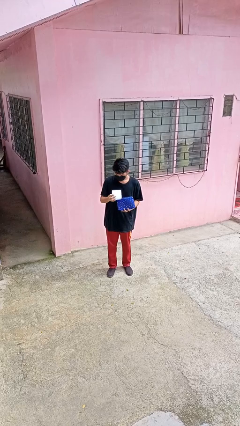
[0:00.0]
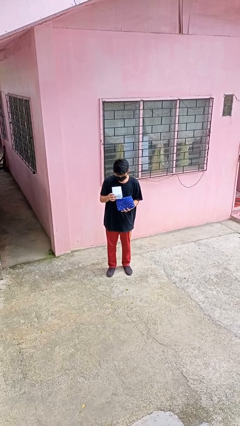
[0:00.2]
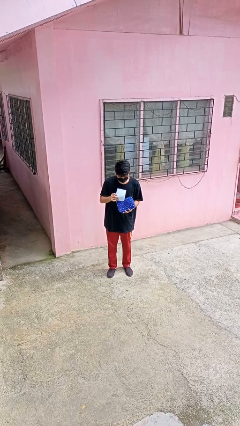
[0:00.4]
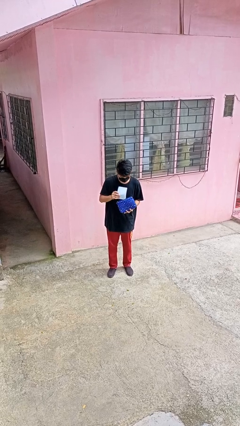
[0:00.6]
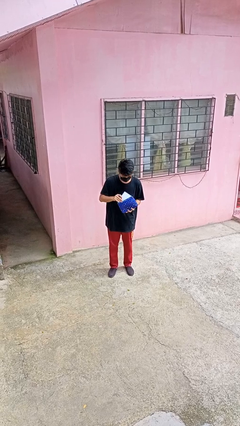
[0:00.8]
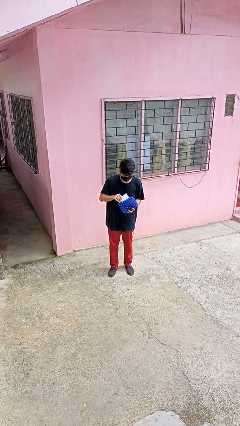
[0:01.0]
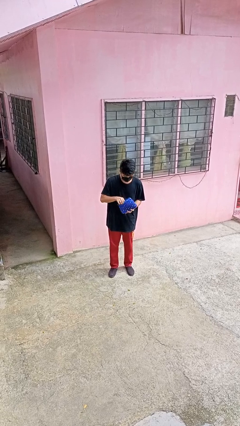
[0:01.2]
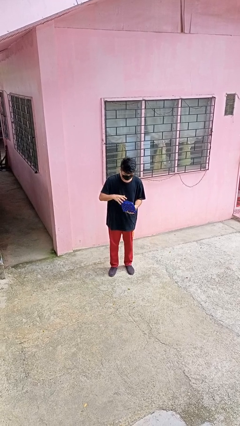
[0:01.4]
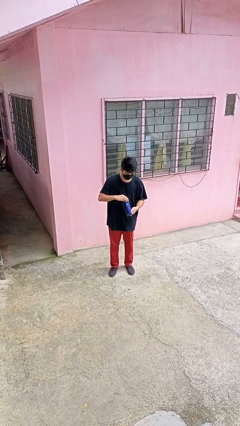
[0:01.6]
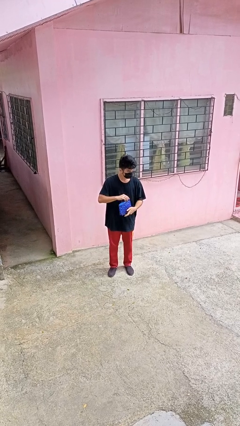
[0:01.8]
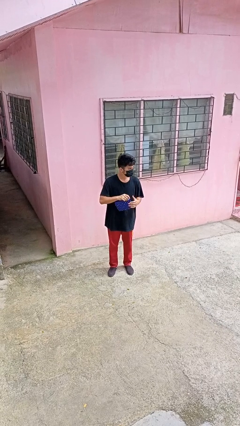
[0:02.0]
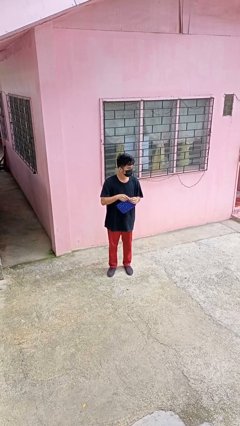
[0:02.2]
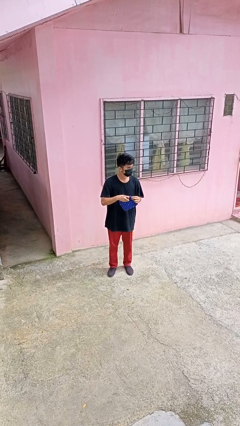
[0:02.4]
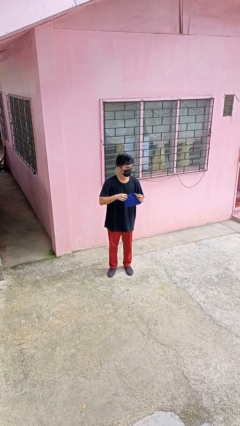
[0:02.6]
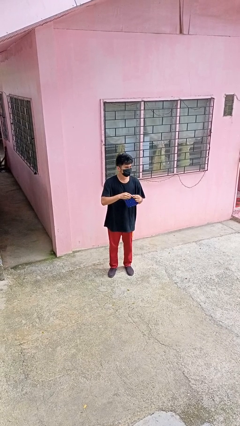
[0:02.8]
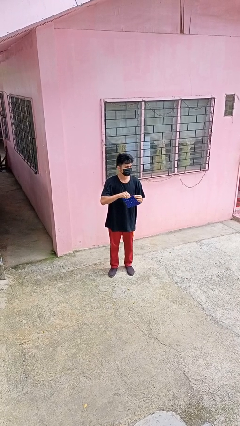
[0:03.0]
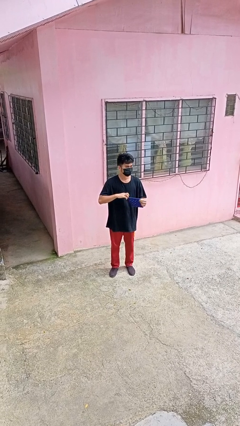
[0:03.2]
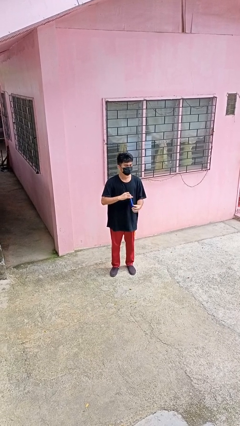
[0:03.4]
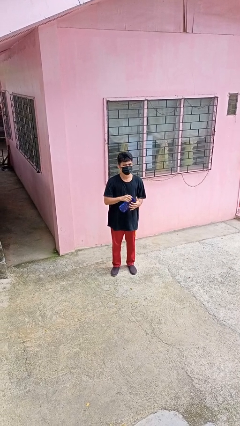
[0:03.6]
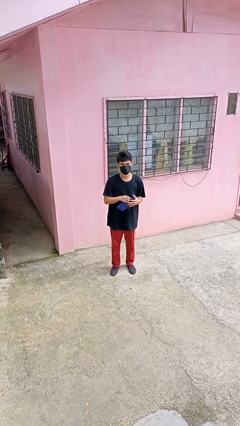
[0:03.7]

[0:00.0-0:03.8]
person puts object into purse

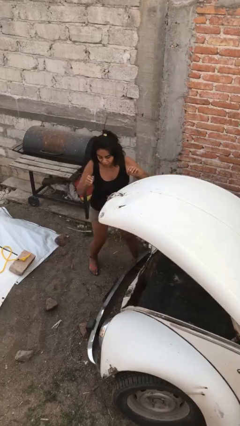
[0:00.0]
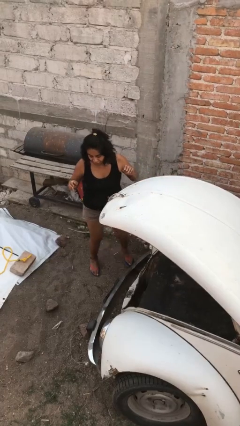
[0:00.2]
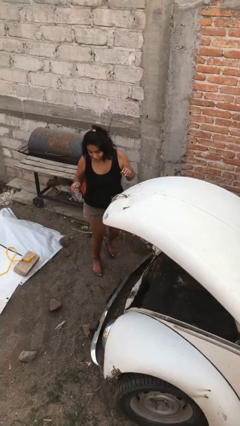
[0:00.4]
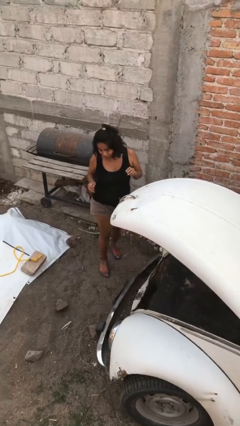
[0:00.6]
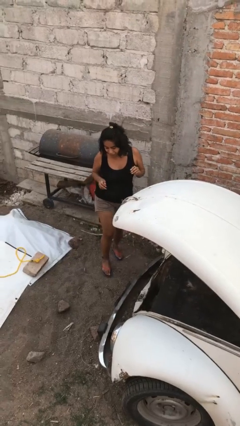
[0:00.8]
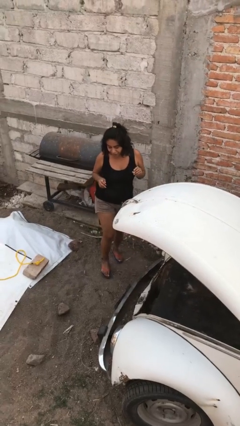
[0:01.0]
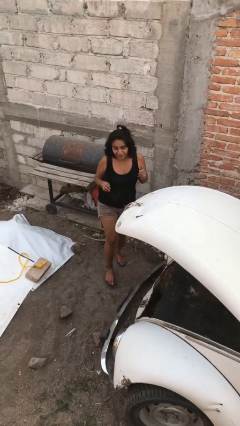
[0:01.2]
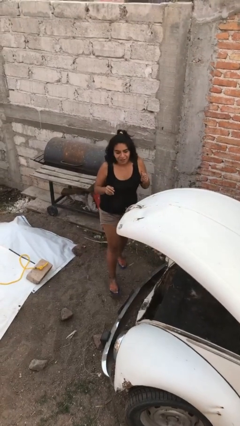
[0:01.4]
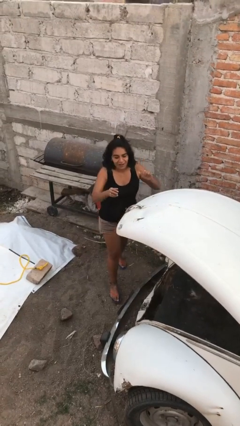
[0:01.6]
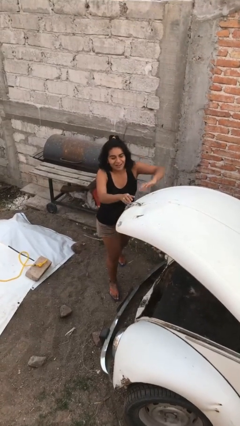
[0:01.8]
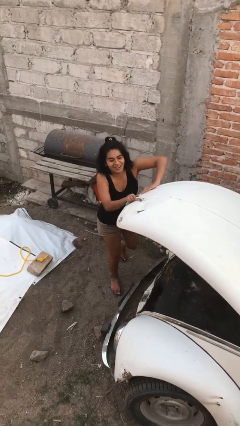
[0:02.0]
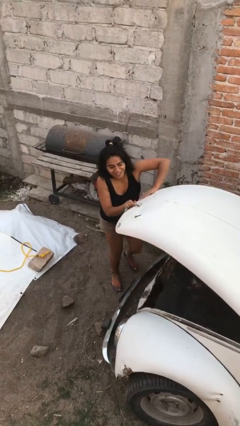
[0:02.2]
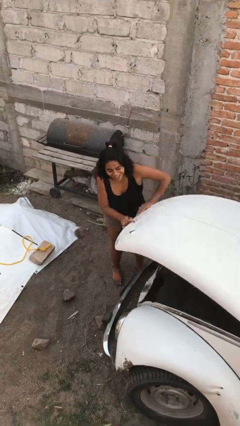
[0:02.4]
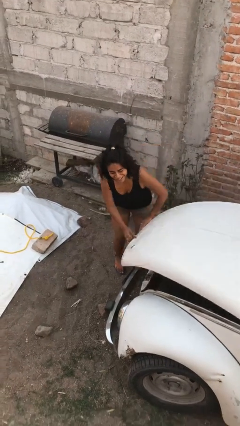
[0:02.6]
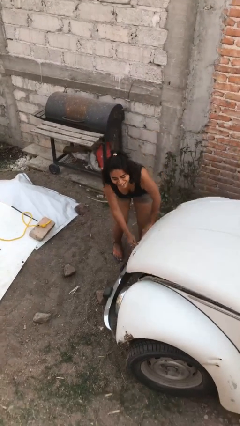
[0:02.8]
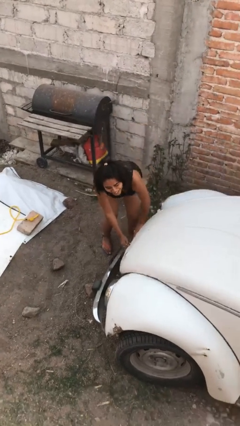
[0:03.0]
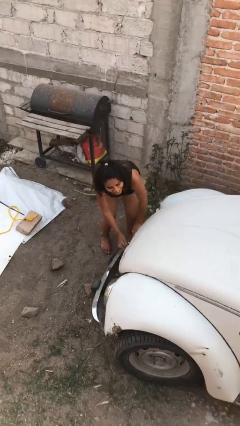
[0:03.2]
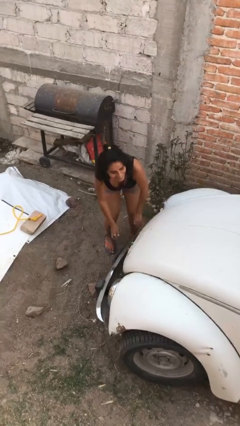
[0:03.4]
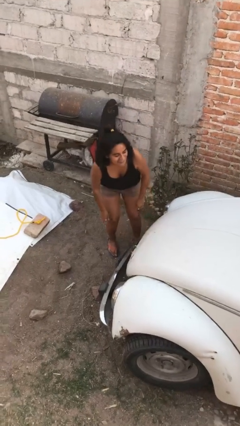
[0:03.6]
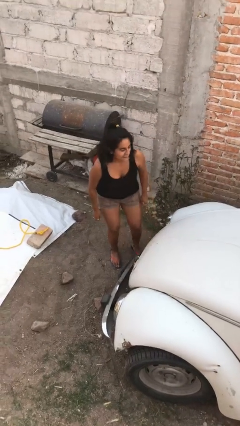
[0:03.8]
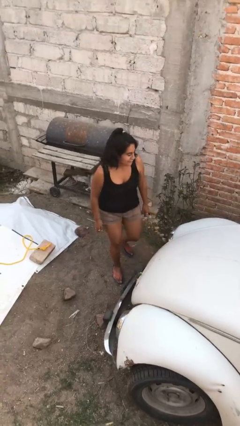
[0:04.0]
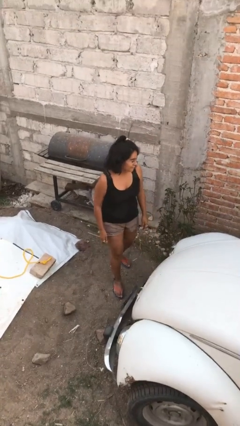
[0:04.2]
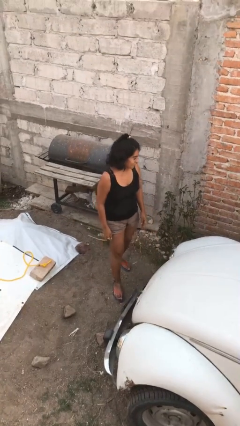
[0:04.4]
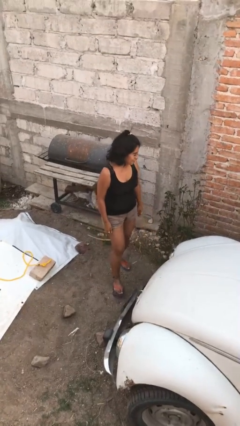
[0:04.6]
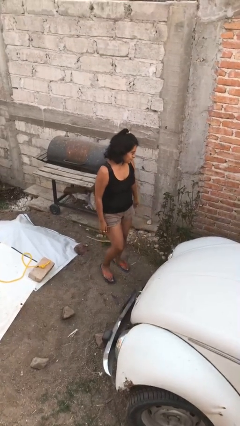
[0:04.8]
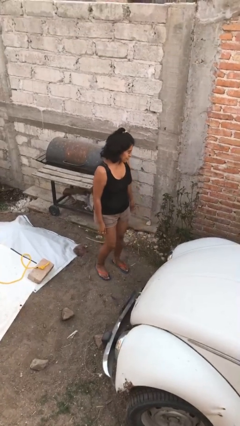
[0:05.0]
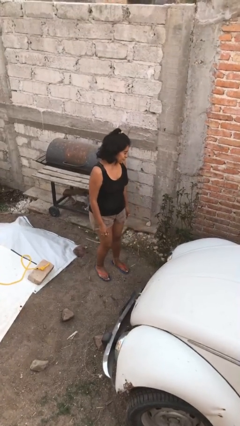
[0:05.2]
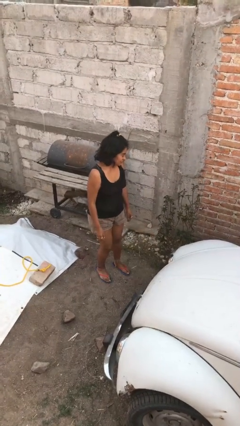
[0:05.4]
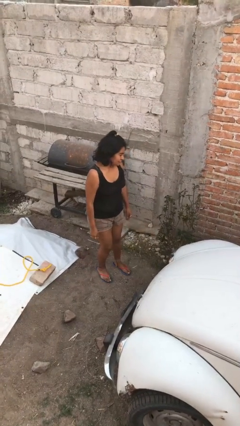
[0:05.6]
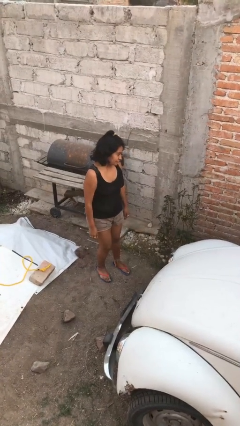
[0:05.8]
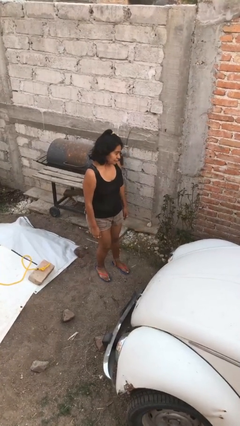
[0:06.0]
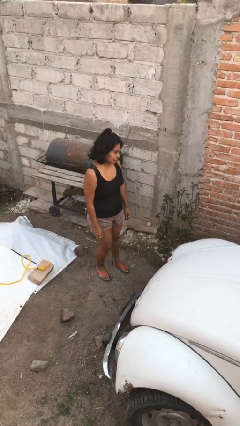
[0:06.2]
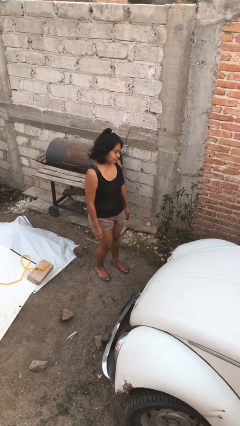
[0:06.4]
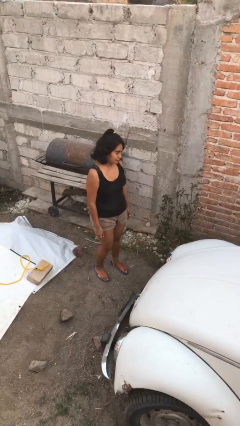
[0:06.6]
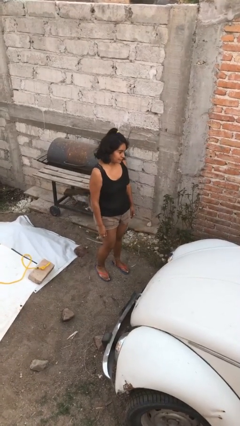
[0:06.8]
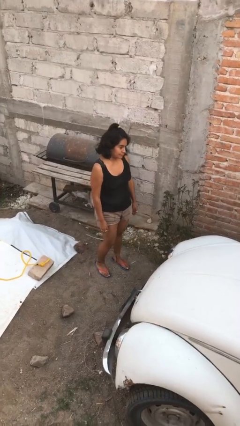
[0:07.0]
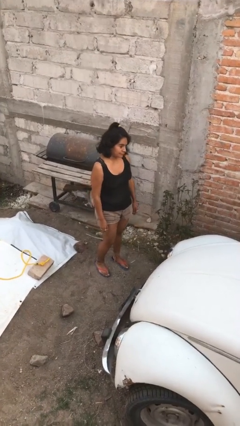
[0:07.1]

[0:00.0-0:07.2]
person closes car trunk

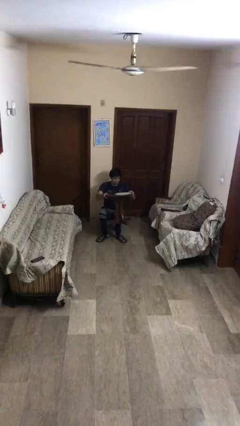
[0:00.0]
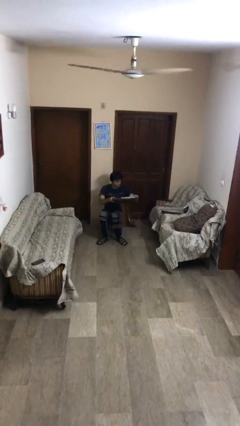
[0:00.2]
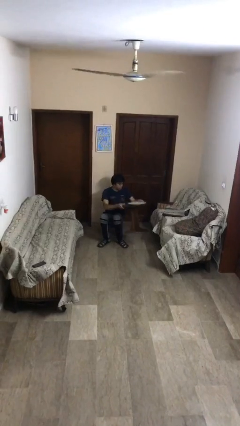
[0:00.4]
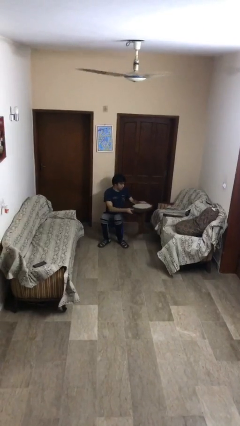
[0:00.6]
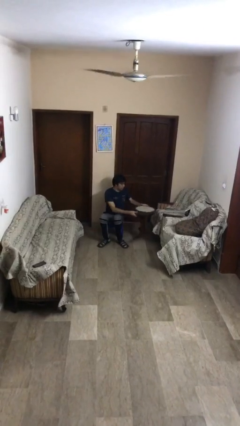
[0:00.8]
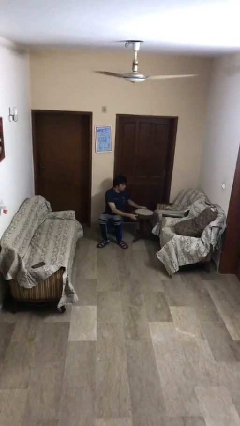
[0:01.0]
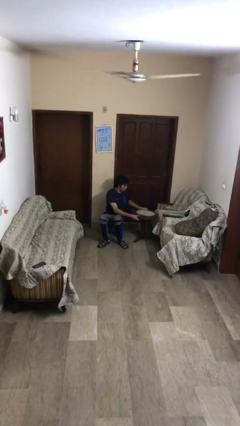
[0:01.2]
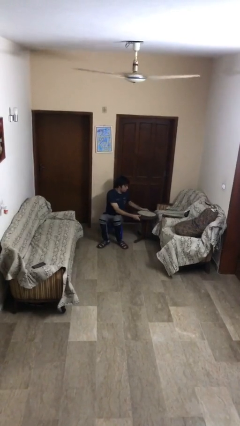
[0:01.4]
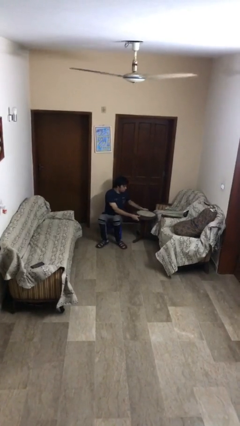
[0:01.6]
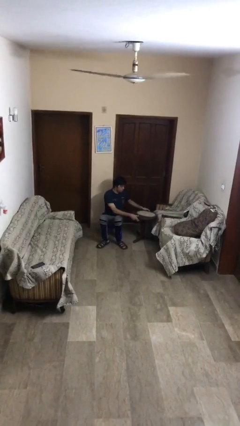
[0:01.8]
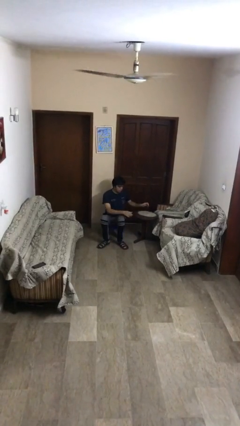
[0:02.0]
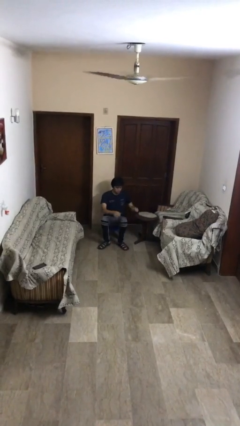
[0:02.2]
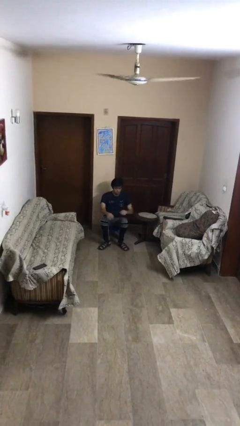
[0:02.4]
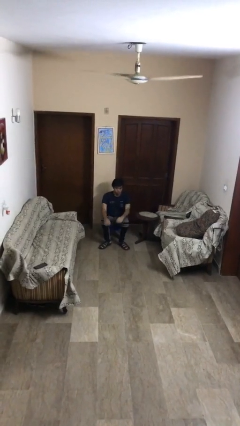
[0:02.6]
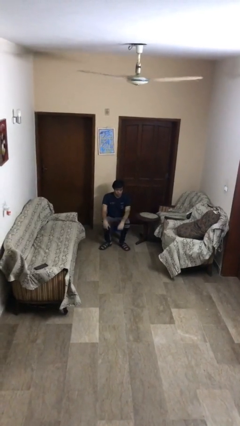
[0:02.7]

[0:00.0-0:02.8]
person puts down object on floor

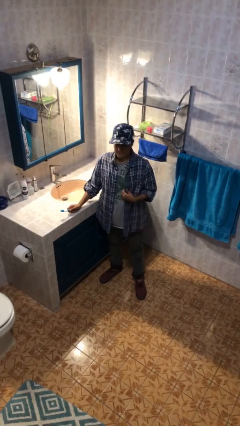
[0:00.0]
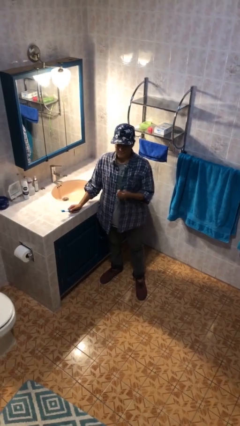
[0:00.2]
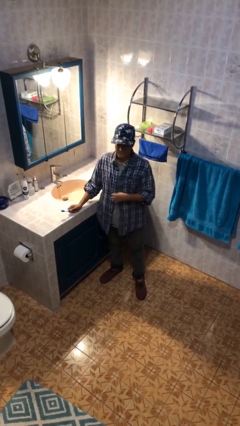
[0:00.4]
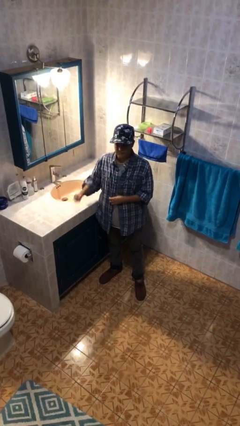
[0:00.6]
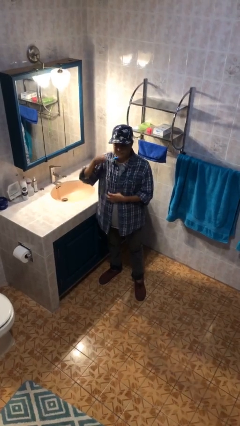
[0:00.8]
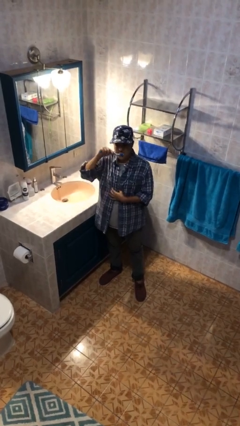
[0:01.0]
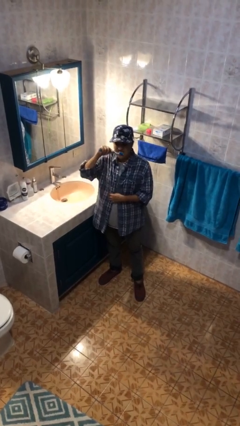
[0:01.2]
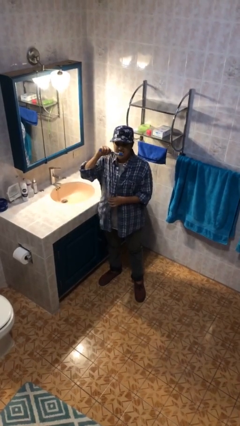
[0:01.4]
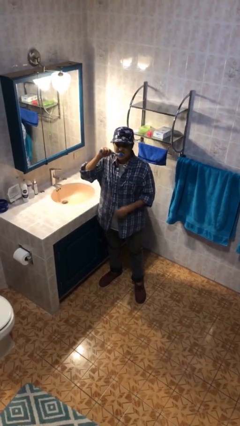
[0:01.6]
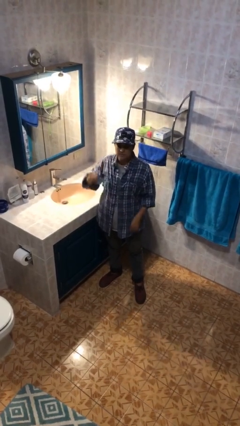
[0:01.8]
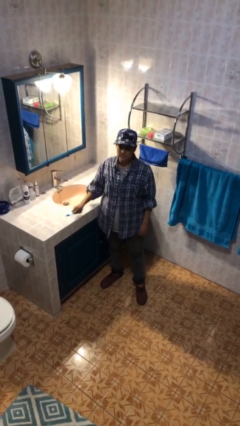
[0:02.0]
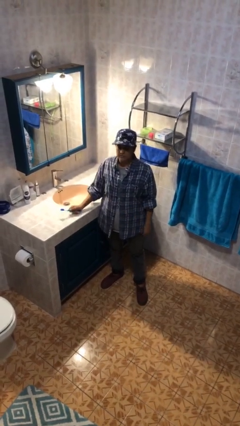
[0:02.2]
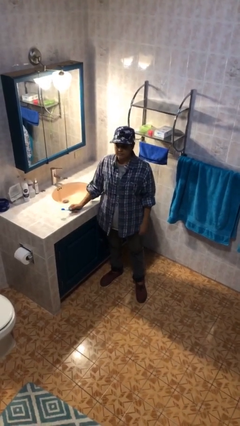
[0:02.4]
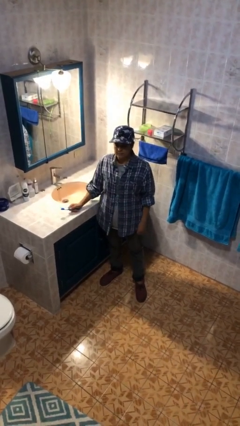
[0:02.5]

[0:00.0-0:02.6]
person brushes teeth

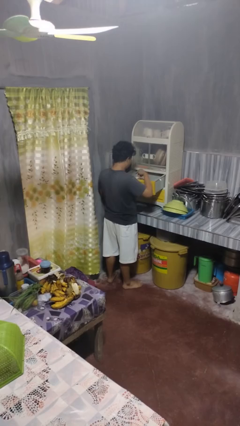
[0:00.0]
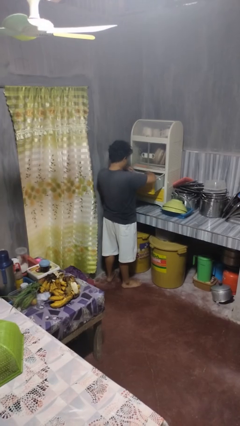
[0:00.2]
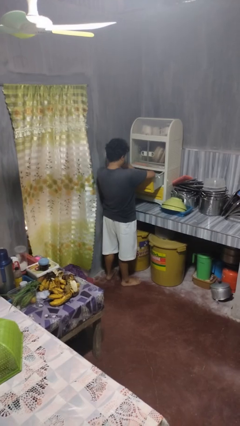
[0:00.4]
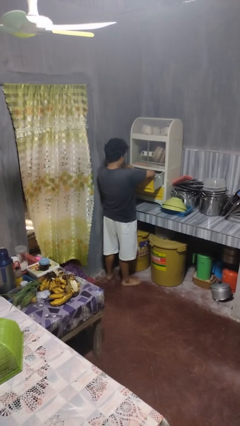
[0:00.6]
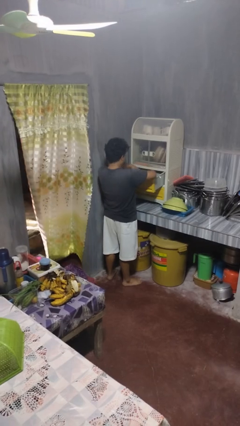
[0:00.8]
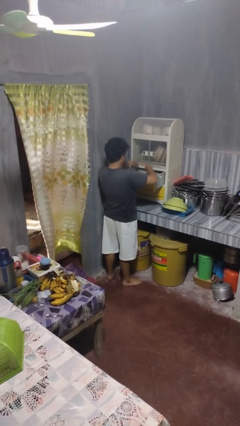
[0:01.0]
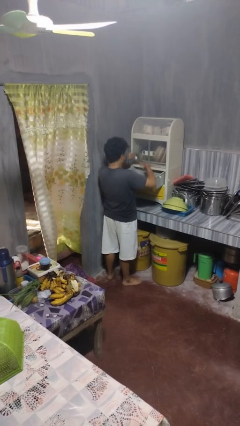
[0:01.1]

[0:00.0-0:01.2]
person takes object from kitchen drawer

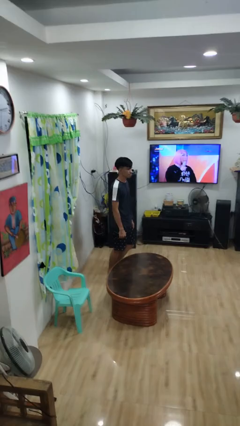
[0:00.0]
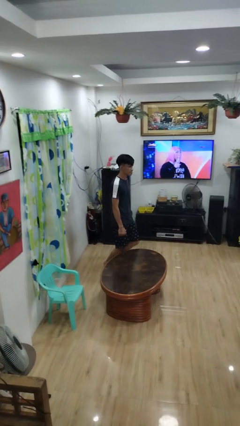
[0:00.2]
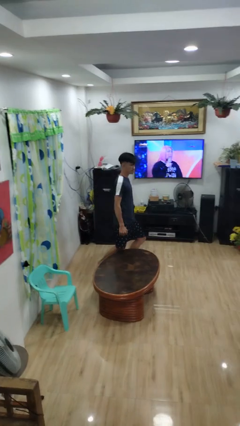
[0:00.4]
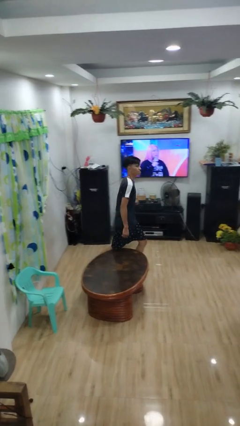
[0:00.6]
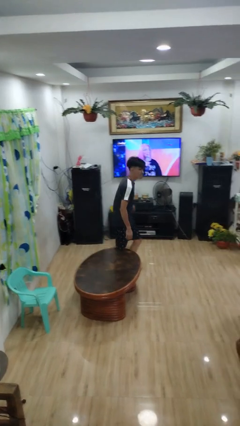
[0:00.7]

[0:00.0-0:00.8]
person bumps into table
